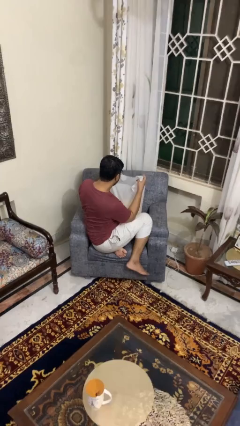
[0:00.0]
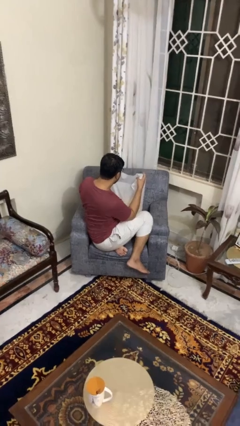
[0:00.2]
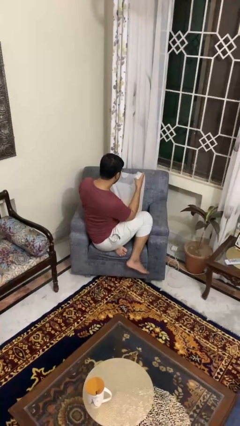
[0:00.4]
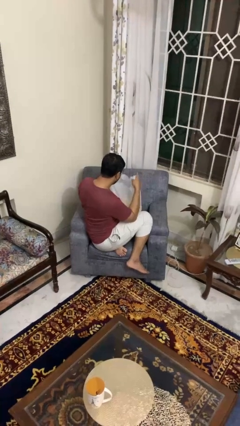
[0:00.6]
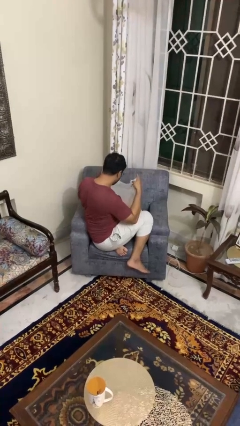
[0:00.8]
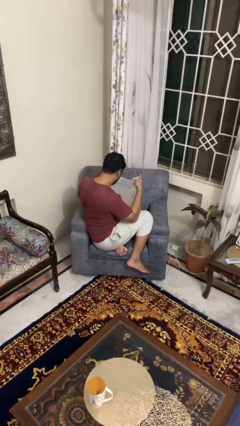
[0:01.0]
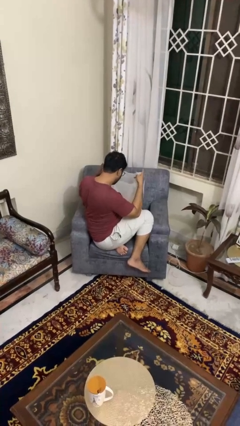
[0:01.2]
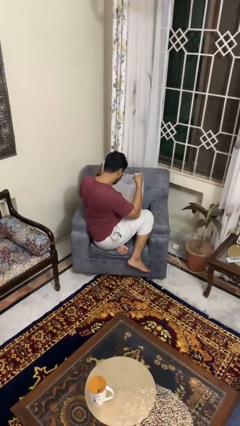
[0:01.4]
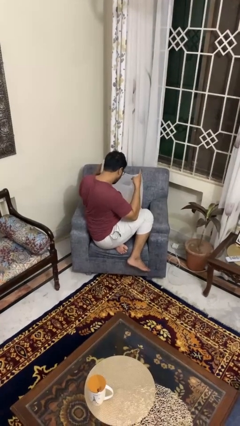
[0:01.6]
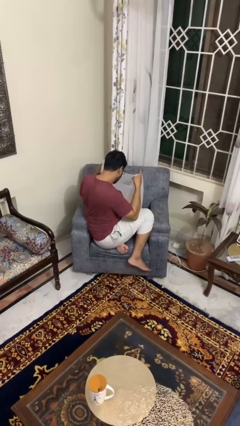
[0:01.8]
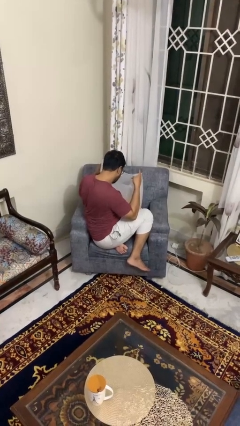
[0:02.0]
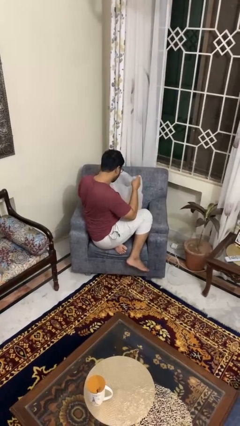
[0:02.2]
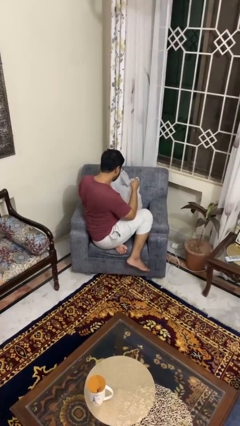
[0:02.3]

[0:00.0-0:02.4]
person searches in bag

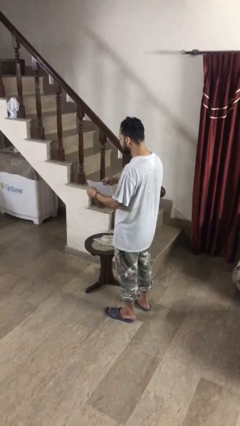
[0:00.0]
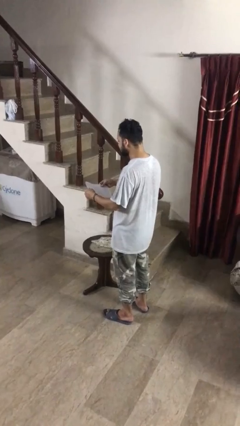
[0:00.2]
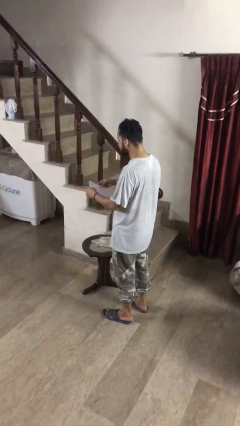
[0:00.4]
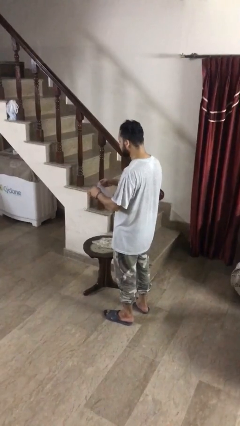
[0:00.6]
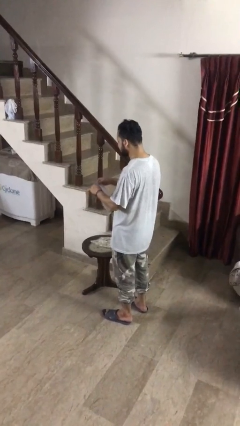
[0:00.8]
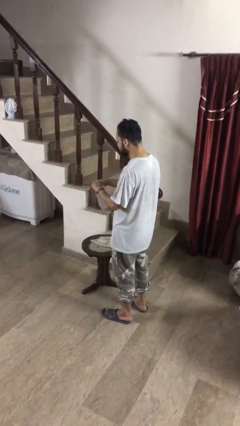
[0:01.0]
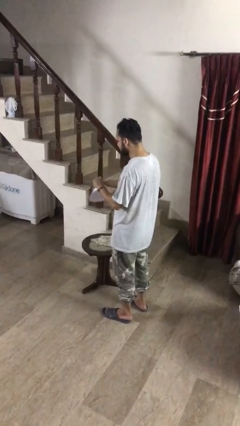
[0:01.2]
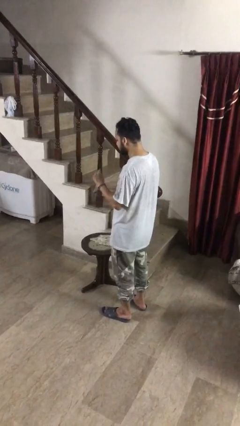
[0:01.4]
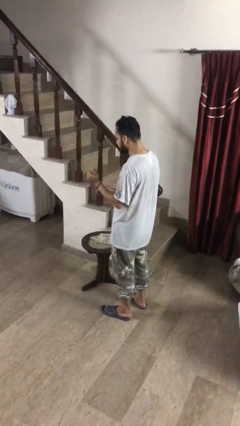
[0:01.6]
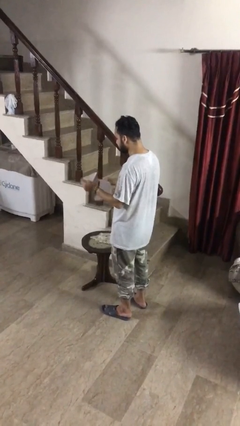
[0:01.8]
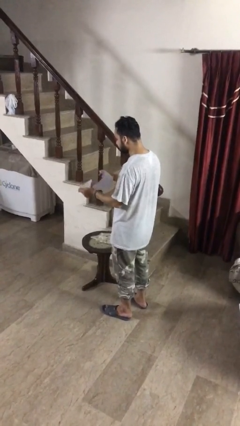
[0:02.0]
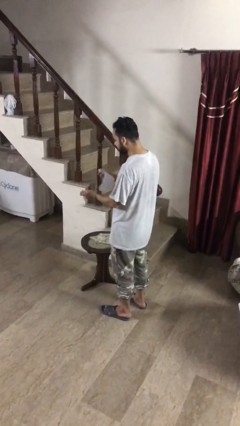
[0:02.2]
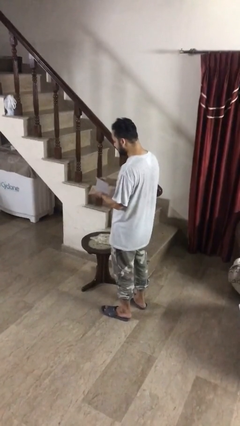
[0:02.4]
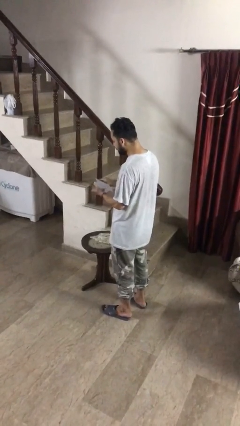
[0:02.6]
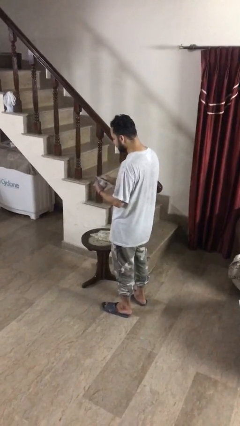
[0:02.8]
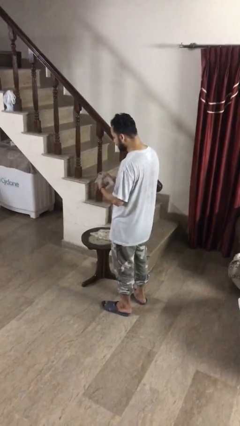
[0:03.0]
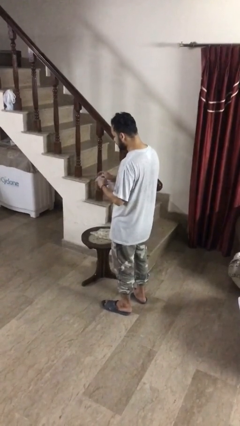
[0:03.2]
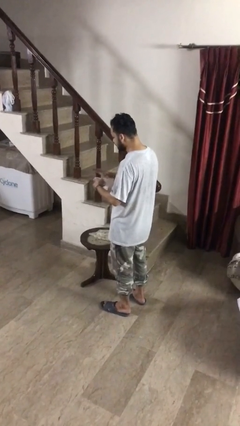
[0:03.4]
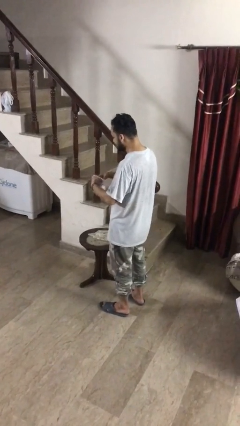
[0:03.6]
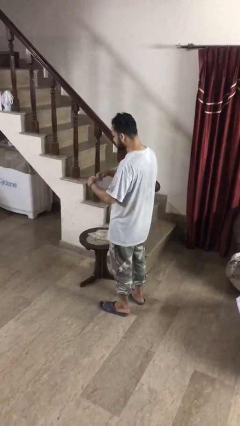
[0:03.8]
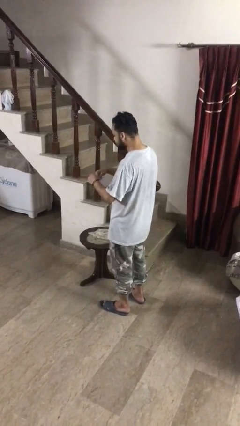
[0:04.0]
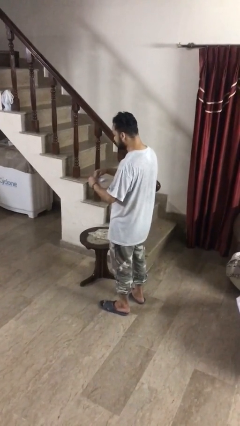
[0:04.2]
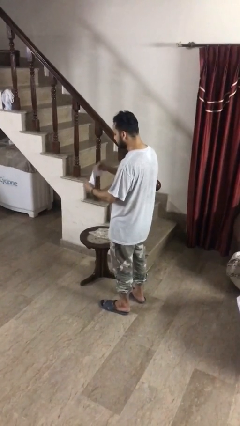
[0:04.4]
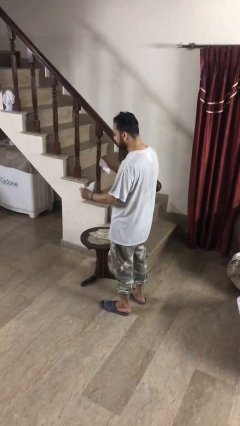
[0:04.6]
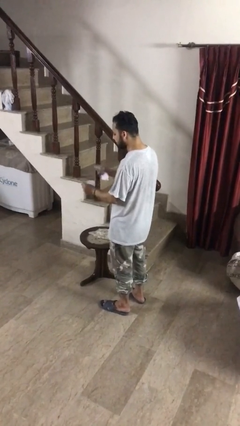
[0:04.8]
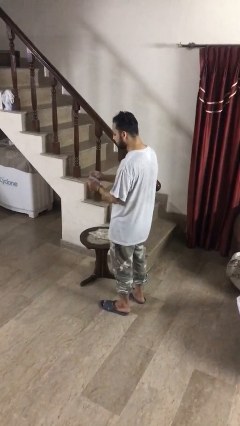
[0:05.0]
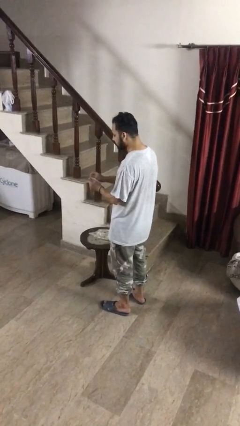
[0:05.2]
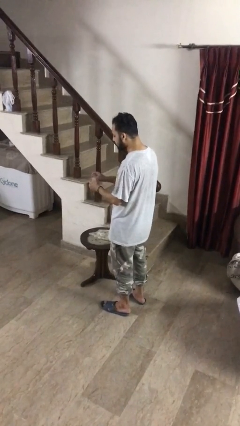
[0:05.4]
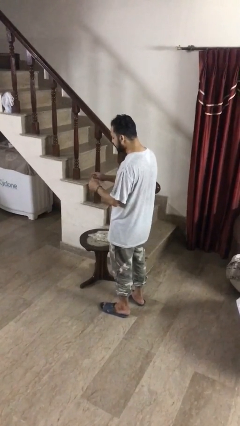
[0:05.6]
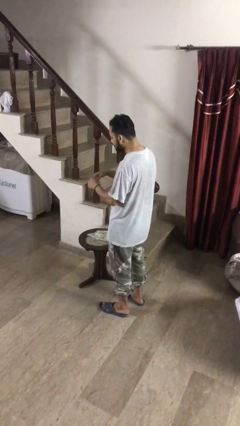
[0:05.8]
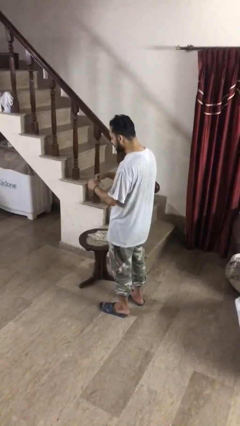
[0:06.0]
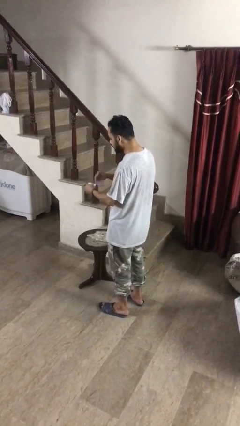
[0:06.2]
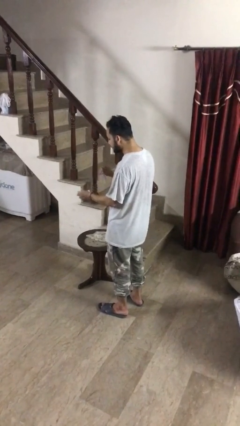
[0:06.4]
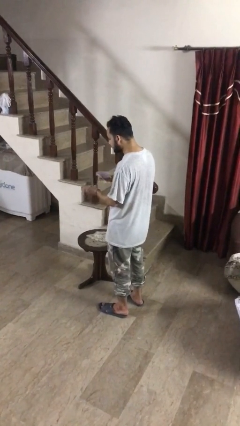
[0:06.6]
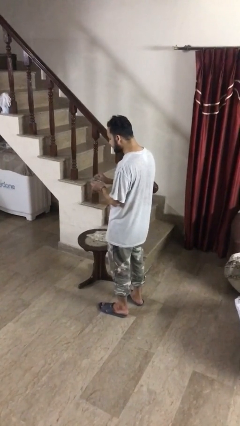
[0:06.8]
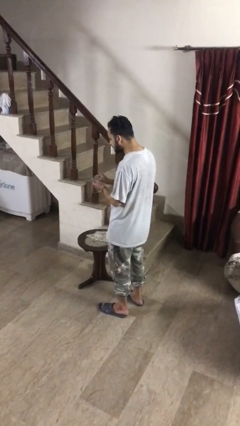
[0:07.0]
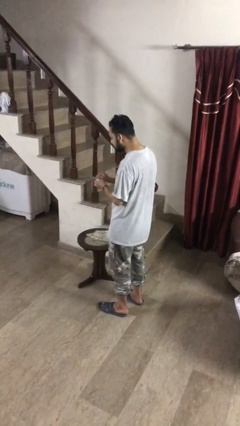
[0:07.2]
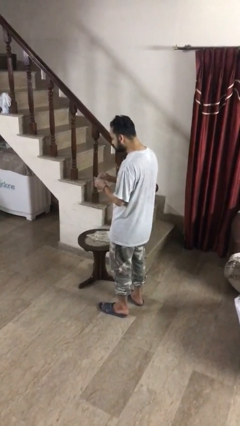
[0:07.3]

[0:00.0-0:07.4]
person tears paper

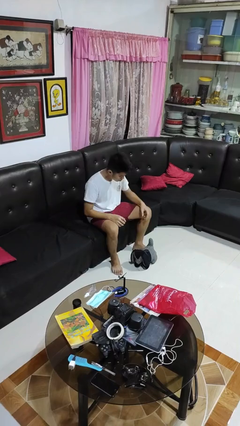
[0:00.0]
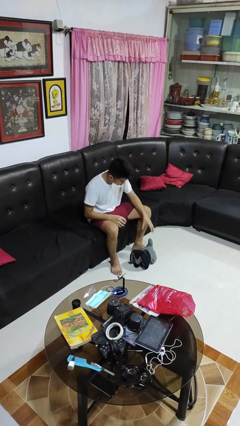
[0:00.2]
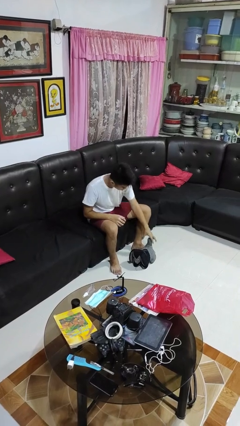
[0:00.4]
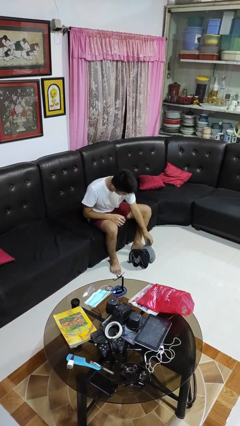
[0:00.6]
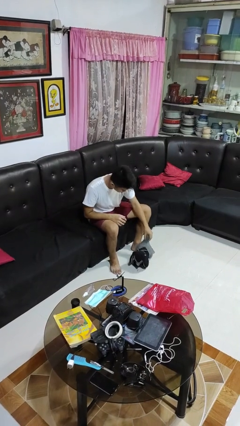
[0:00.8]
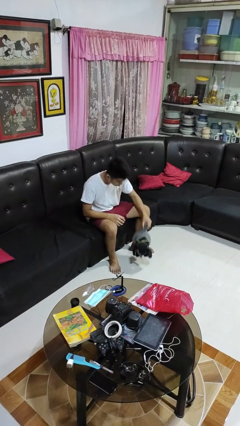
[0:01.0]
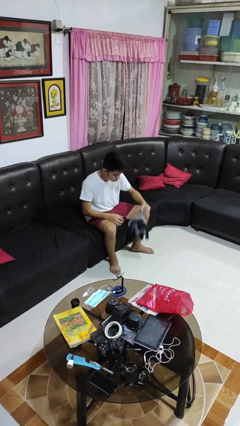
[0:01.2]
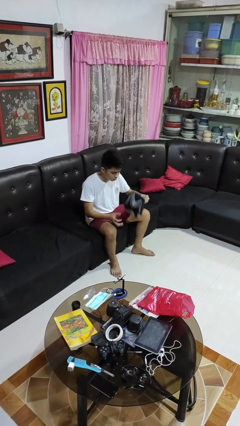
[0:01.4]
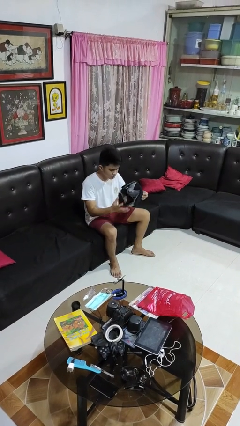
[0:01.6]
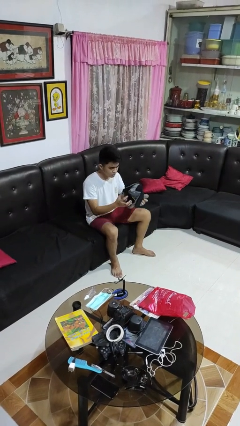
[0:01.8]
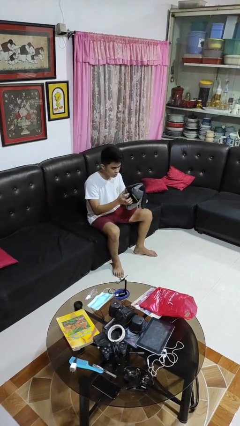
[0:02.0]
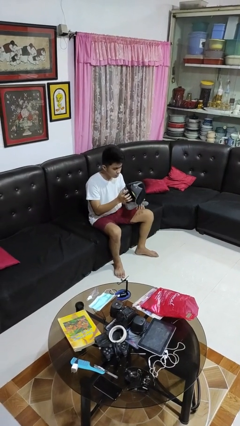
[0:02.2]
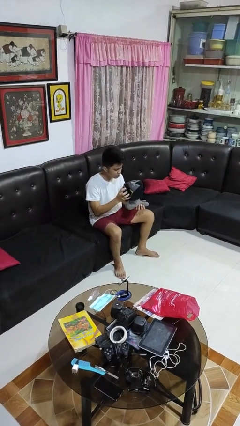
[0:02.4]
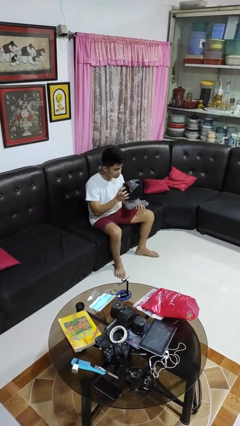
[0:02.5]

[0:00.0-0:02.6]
person picks up object from floor

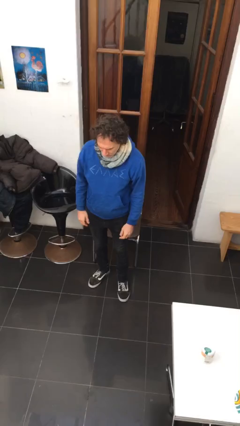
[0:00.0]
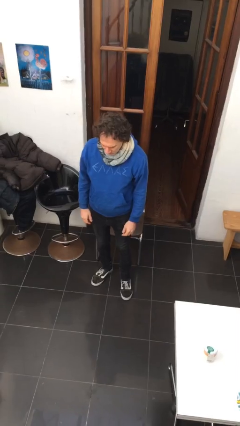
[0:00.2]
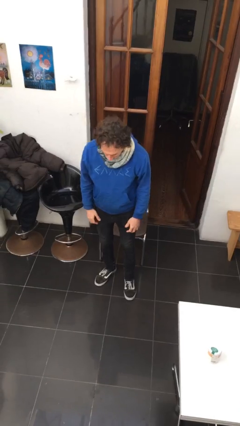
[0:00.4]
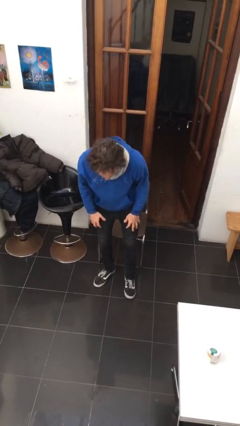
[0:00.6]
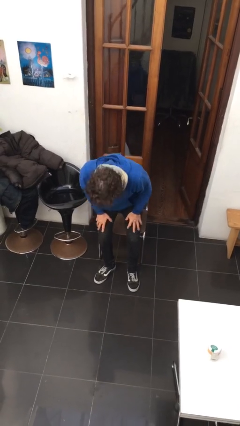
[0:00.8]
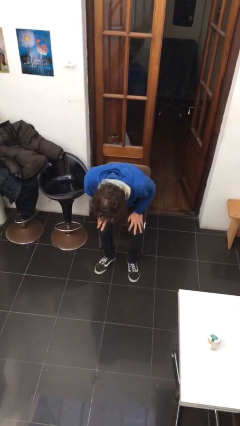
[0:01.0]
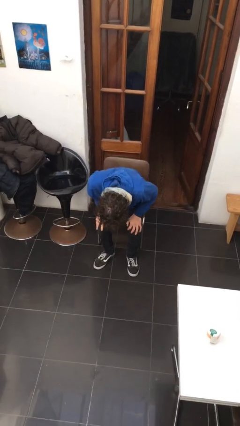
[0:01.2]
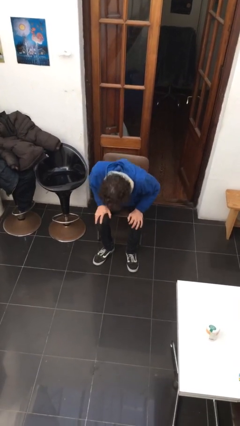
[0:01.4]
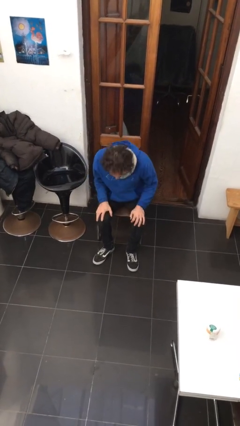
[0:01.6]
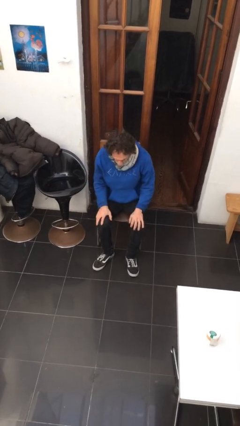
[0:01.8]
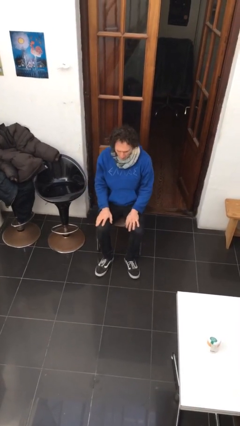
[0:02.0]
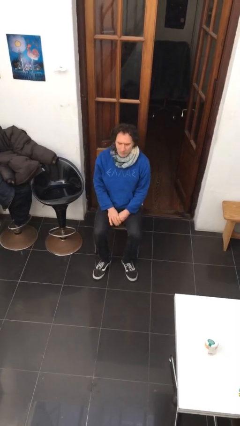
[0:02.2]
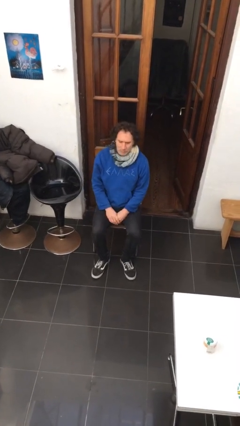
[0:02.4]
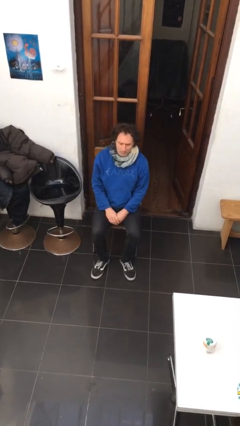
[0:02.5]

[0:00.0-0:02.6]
person sits down

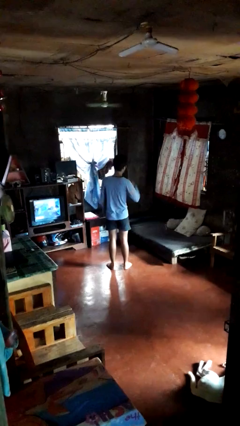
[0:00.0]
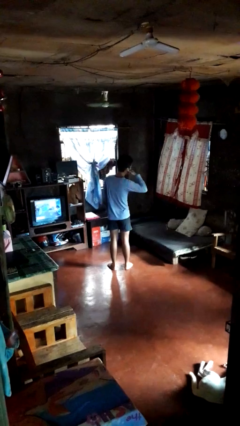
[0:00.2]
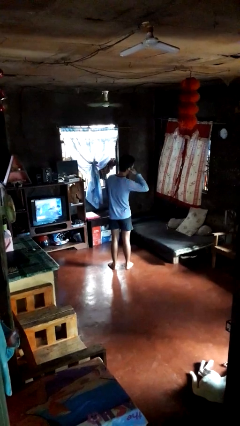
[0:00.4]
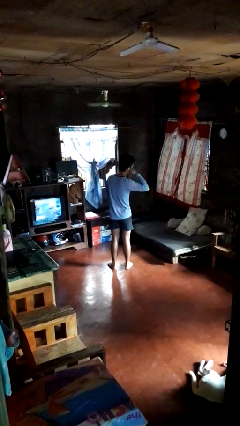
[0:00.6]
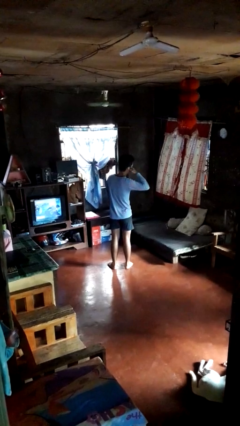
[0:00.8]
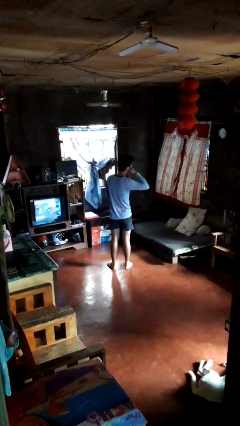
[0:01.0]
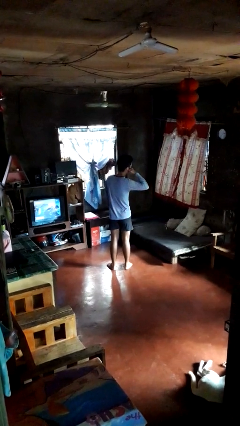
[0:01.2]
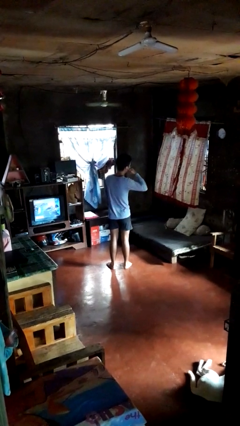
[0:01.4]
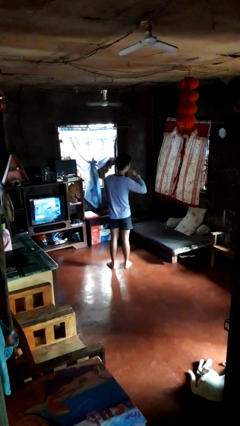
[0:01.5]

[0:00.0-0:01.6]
person gestures call me

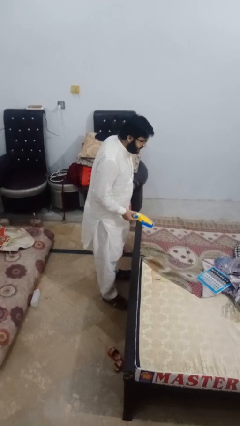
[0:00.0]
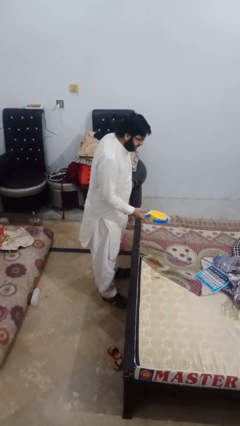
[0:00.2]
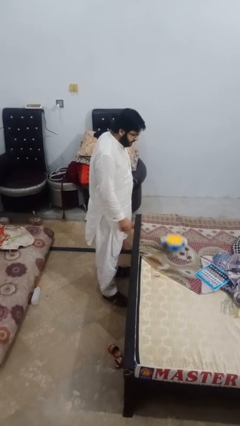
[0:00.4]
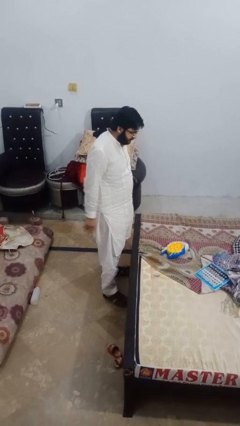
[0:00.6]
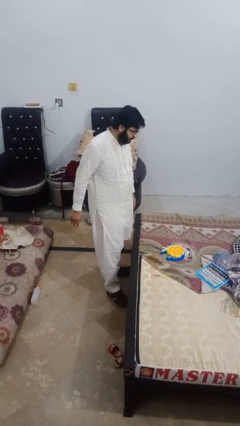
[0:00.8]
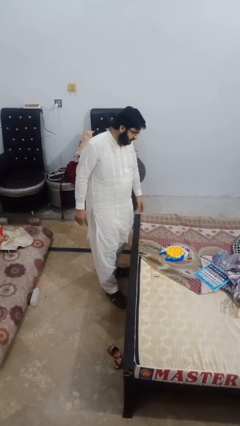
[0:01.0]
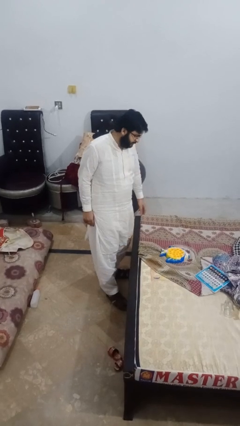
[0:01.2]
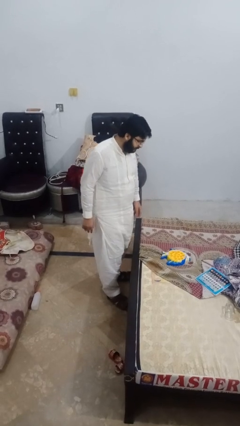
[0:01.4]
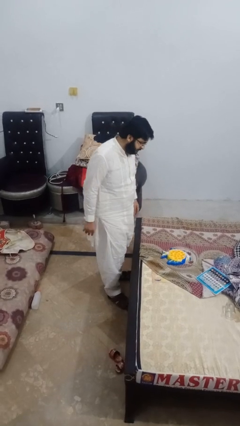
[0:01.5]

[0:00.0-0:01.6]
person puts down object on bed
